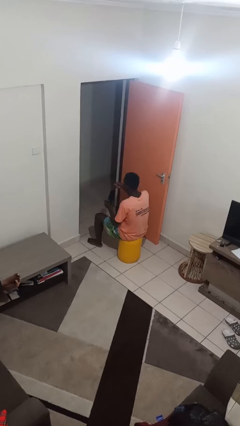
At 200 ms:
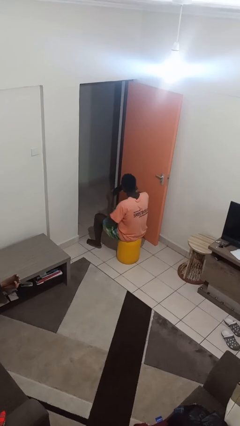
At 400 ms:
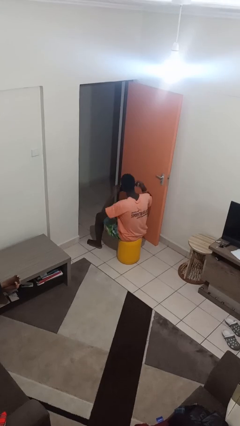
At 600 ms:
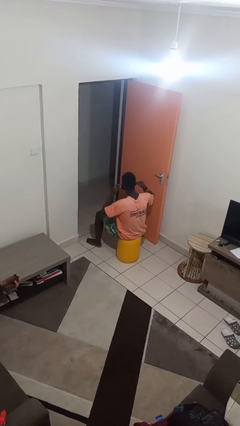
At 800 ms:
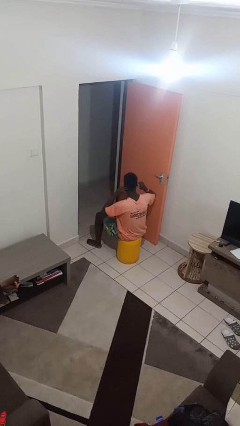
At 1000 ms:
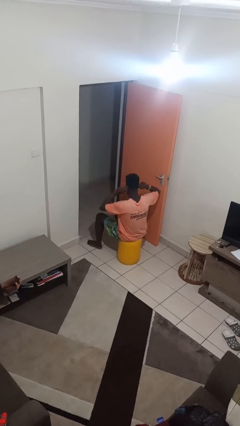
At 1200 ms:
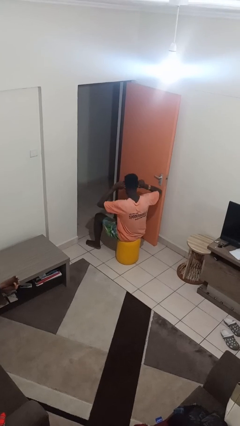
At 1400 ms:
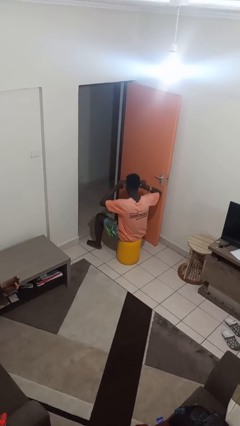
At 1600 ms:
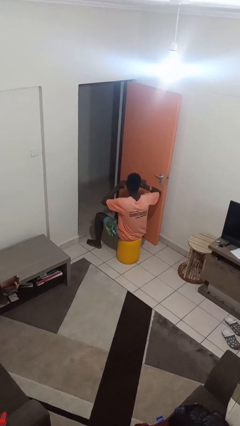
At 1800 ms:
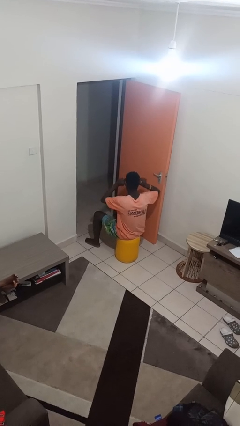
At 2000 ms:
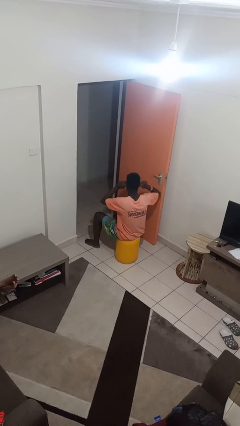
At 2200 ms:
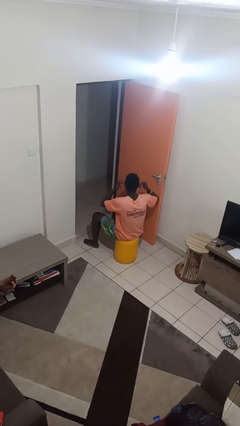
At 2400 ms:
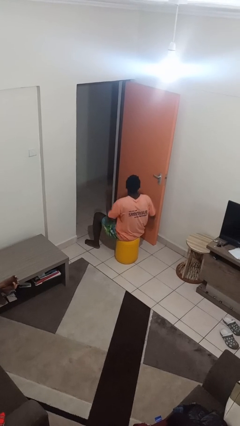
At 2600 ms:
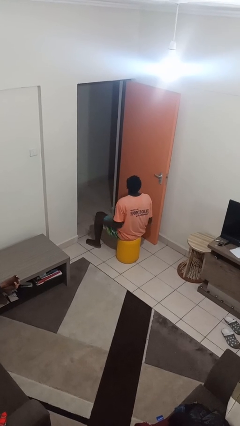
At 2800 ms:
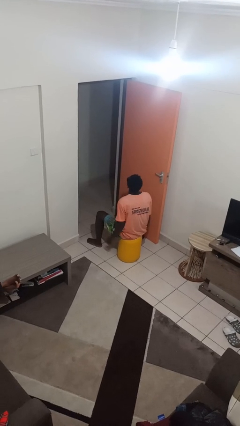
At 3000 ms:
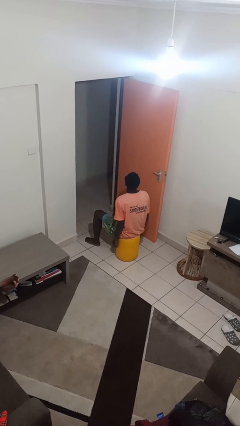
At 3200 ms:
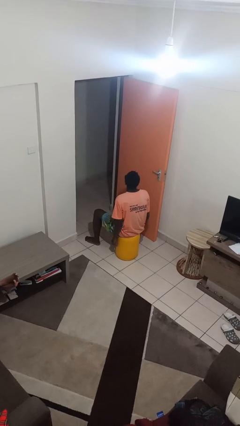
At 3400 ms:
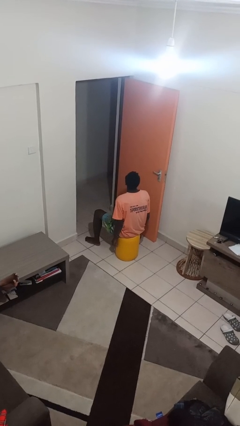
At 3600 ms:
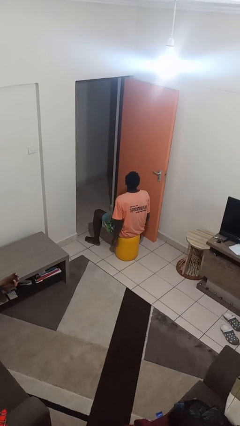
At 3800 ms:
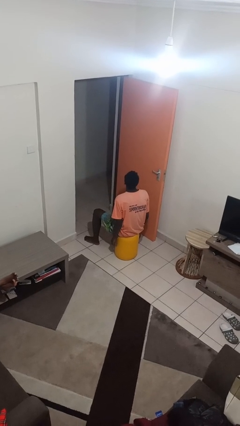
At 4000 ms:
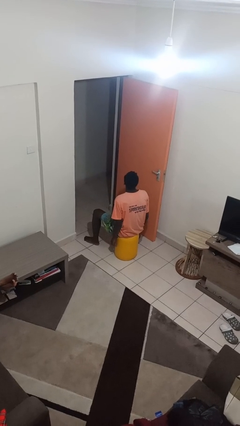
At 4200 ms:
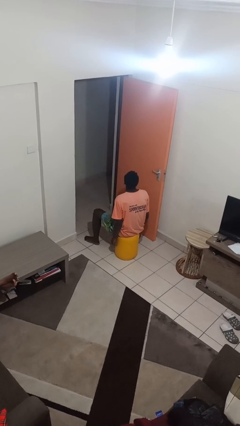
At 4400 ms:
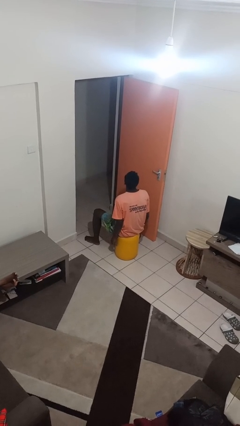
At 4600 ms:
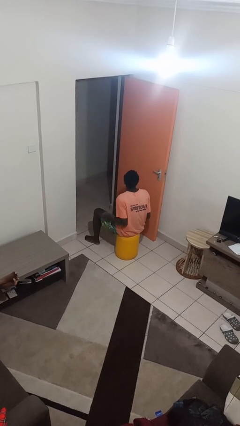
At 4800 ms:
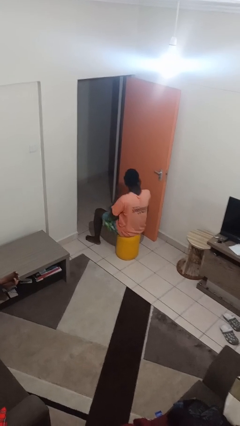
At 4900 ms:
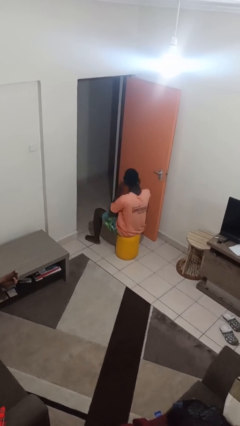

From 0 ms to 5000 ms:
person puts on facemask

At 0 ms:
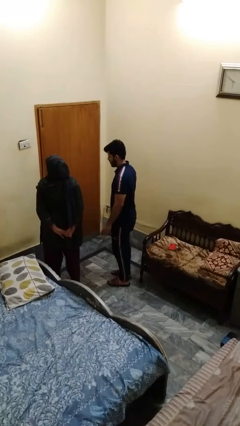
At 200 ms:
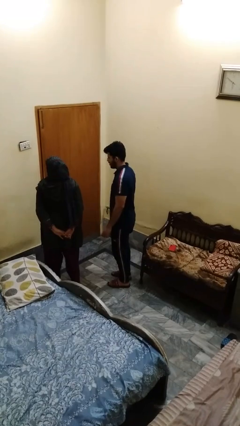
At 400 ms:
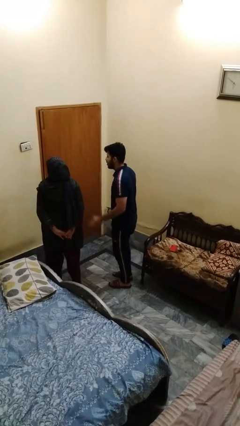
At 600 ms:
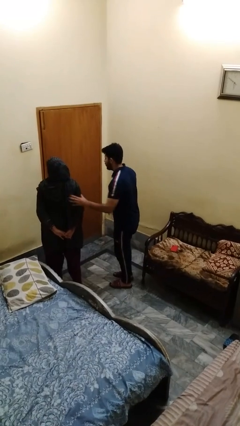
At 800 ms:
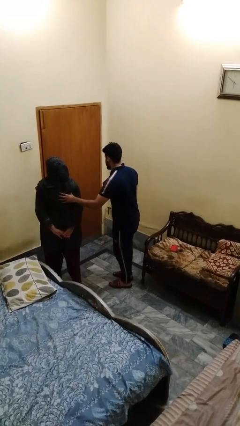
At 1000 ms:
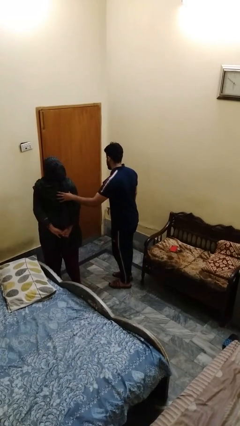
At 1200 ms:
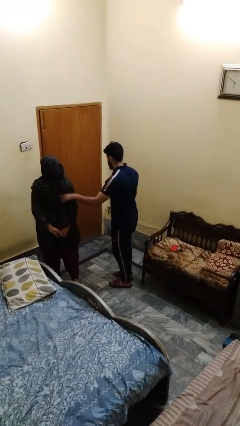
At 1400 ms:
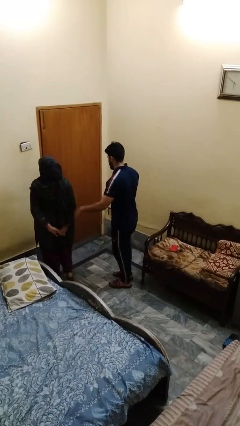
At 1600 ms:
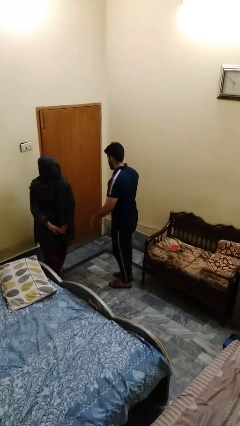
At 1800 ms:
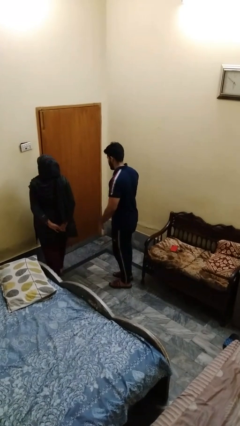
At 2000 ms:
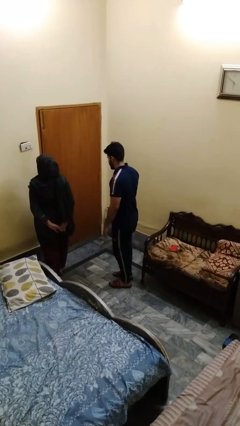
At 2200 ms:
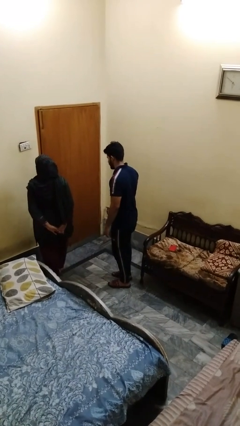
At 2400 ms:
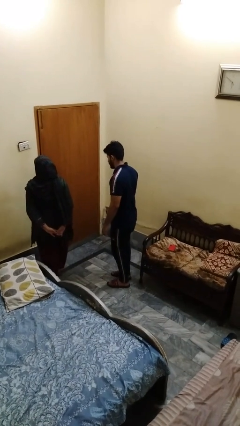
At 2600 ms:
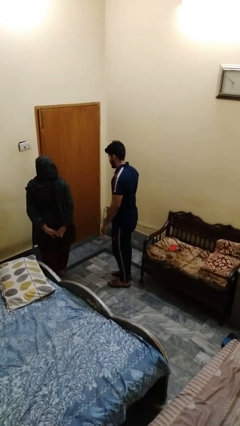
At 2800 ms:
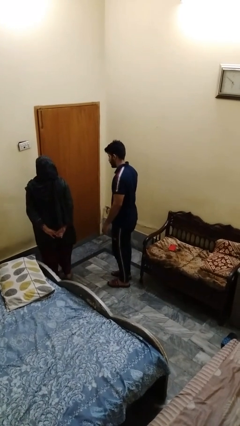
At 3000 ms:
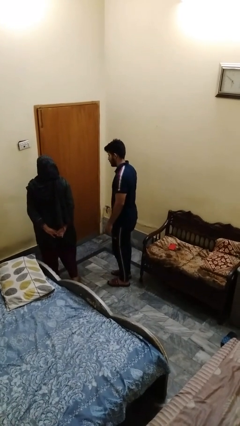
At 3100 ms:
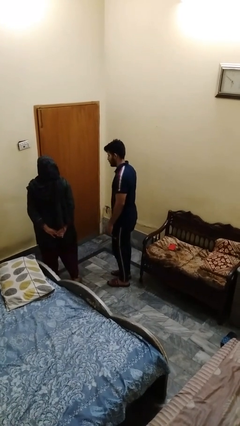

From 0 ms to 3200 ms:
person shoves person

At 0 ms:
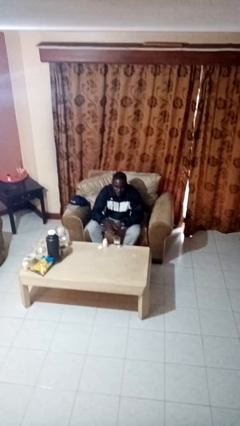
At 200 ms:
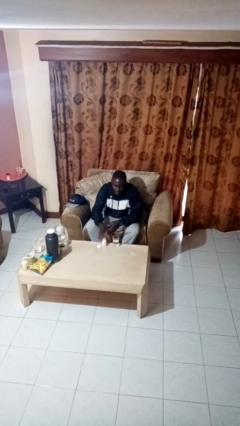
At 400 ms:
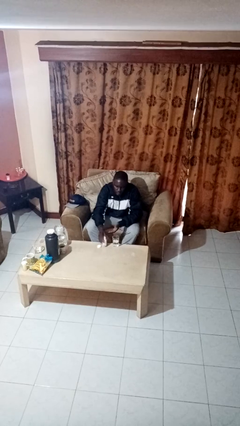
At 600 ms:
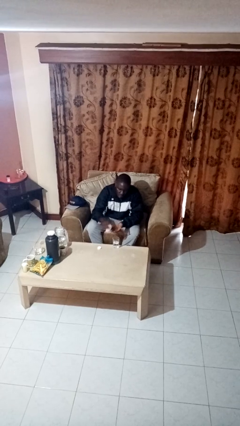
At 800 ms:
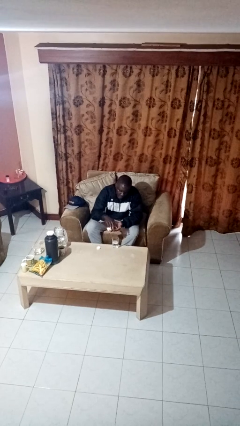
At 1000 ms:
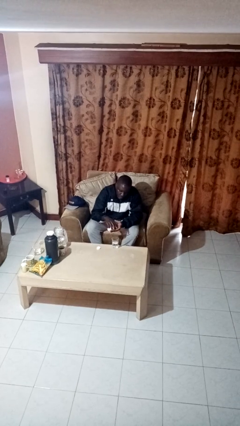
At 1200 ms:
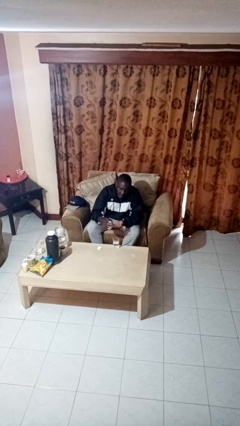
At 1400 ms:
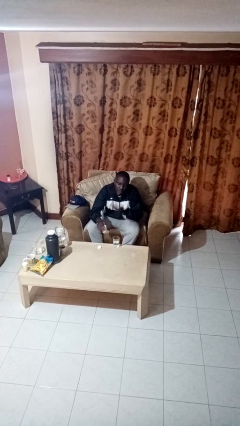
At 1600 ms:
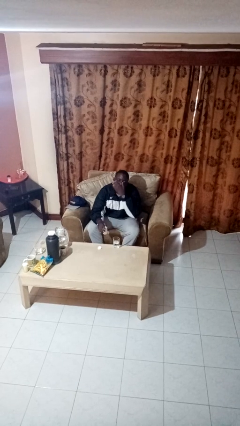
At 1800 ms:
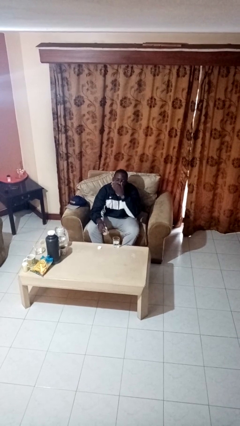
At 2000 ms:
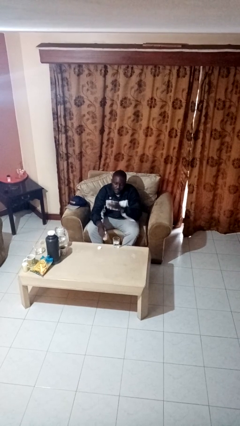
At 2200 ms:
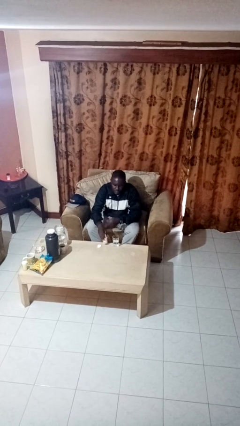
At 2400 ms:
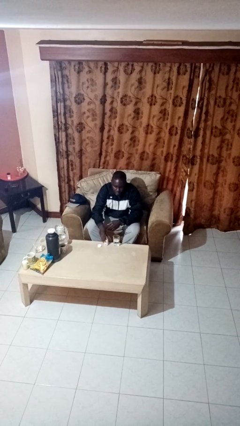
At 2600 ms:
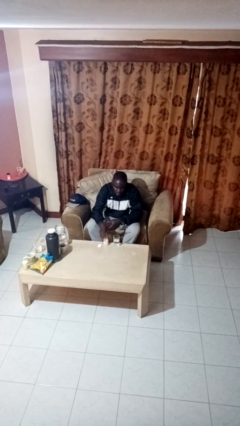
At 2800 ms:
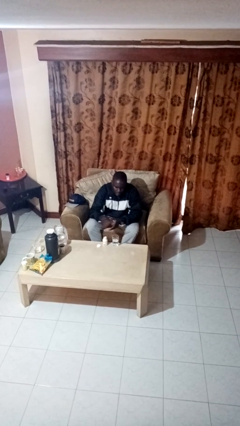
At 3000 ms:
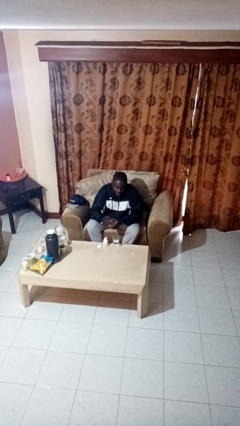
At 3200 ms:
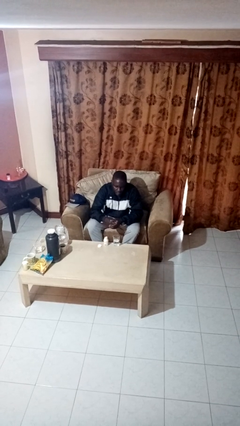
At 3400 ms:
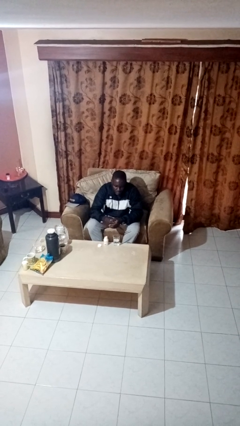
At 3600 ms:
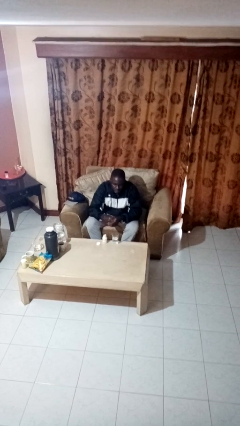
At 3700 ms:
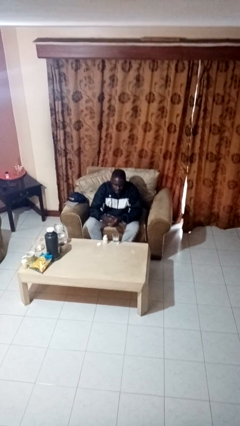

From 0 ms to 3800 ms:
person takes medicine pills

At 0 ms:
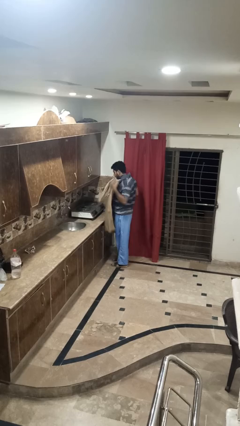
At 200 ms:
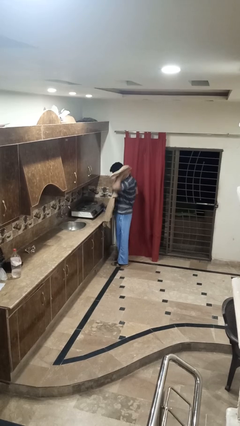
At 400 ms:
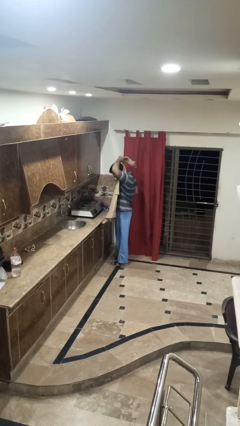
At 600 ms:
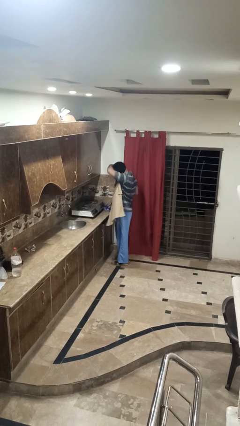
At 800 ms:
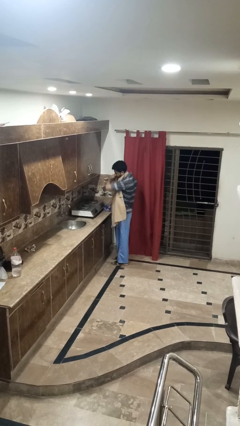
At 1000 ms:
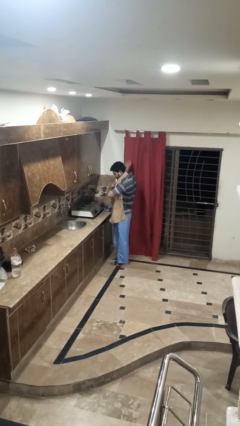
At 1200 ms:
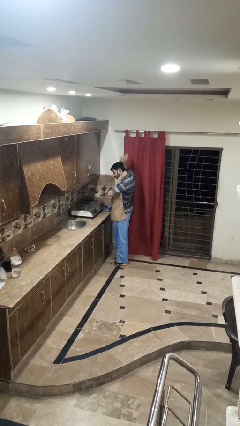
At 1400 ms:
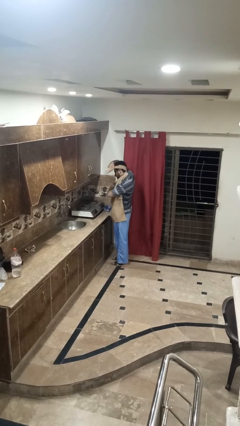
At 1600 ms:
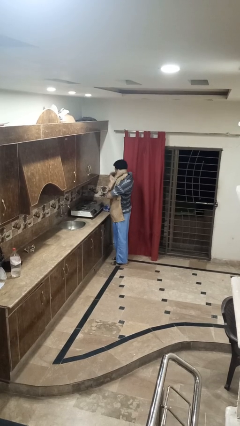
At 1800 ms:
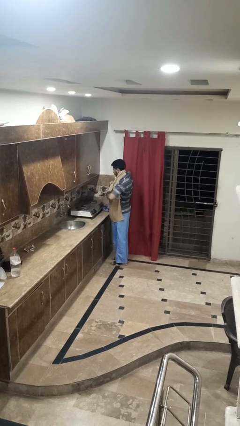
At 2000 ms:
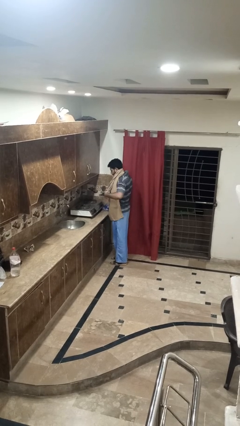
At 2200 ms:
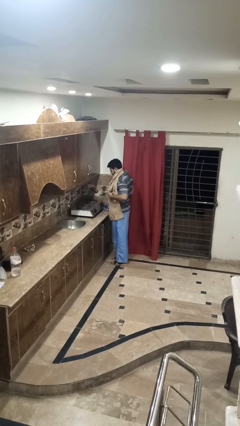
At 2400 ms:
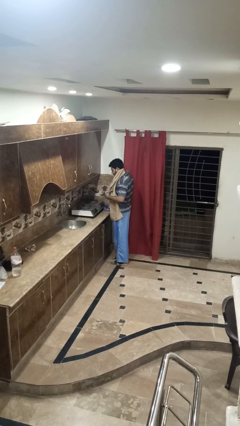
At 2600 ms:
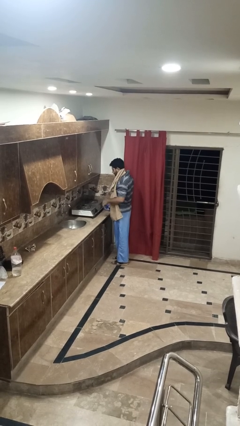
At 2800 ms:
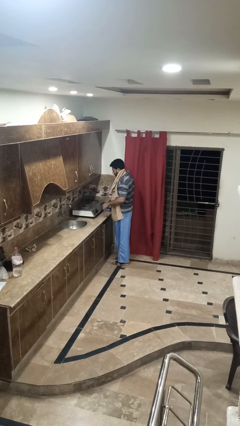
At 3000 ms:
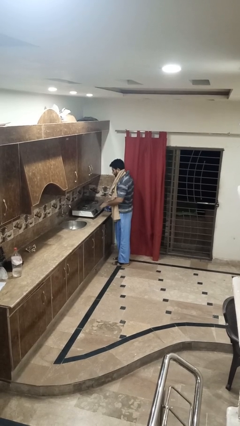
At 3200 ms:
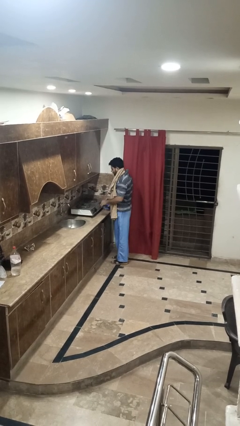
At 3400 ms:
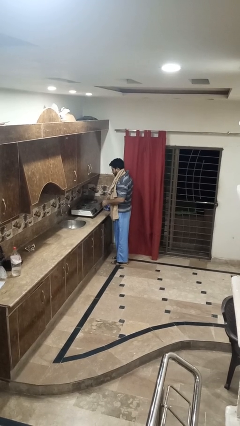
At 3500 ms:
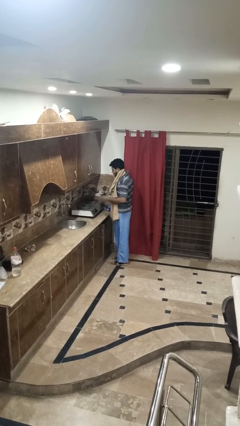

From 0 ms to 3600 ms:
person puts on apron

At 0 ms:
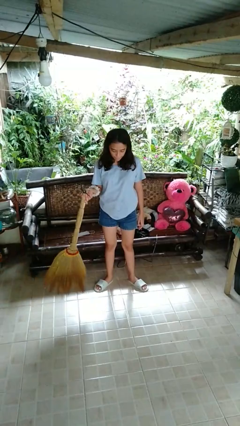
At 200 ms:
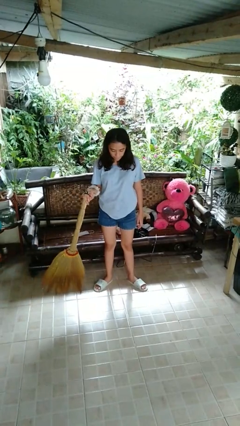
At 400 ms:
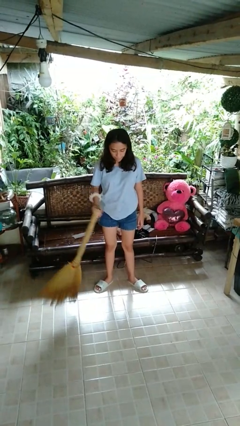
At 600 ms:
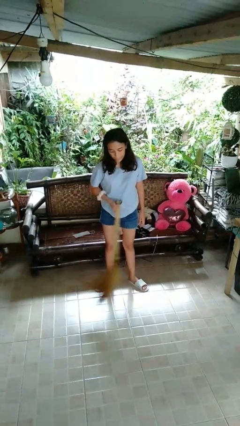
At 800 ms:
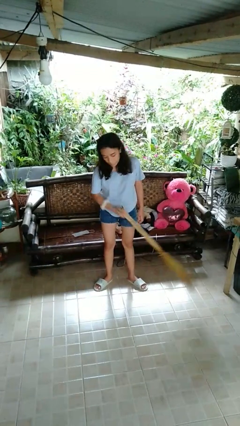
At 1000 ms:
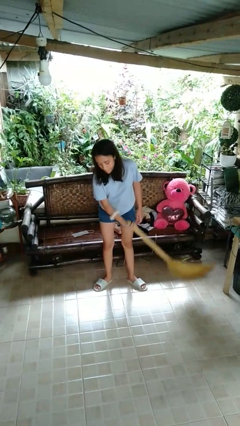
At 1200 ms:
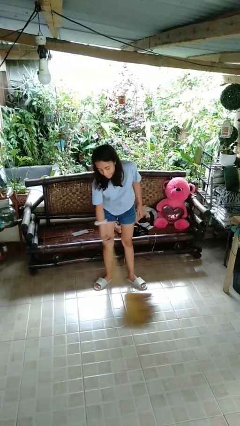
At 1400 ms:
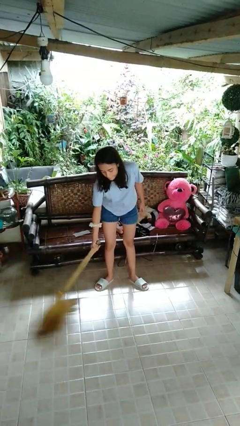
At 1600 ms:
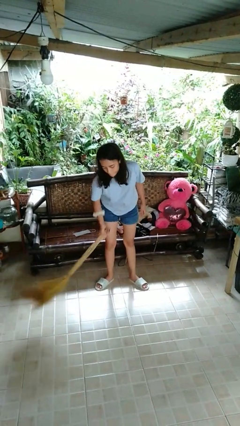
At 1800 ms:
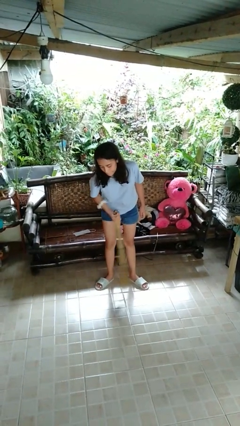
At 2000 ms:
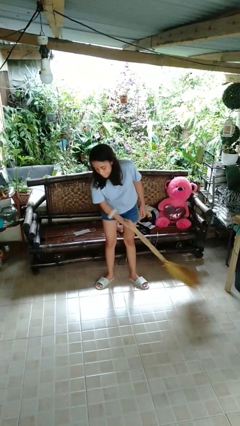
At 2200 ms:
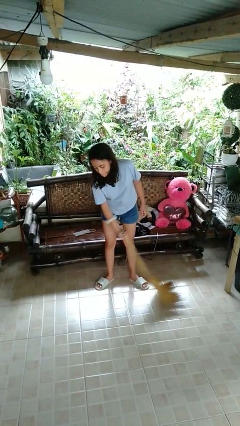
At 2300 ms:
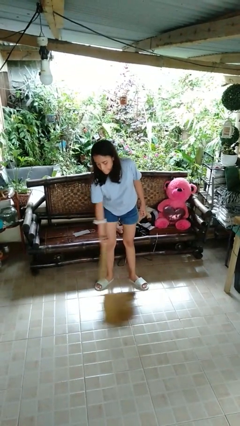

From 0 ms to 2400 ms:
person sweeps floor
